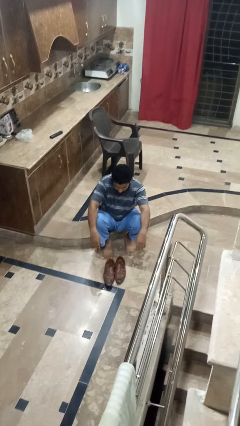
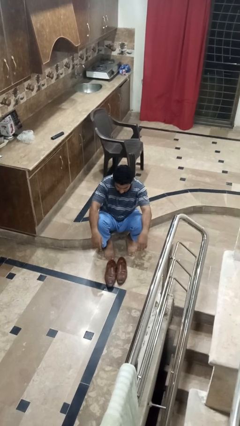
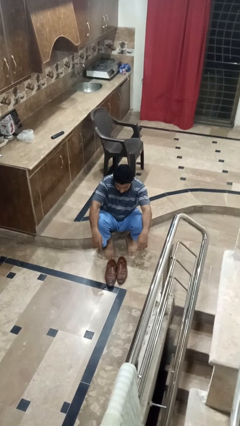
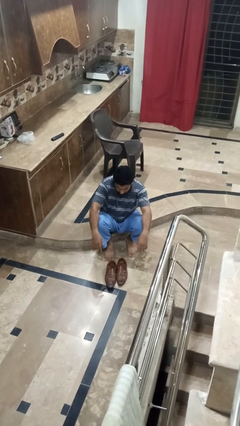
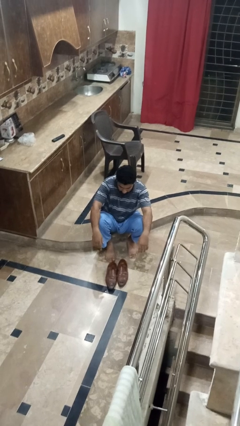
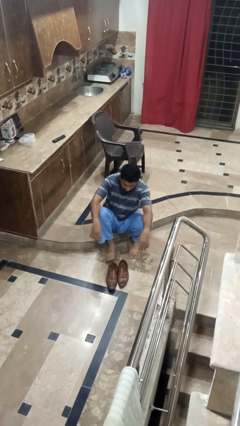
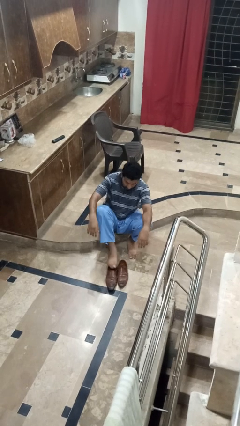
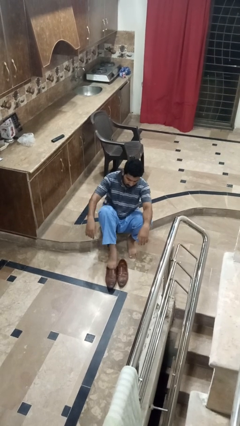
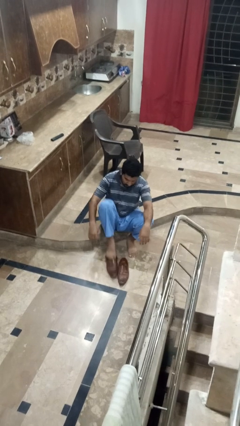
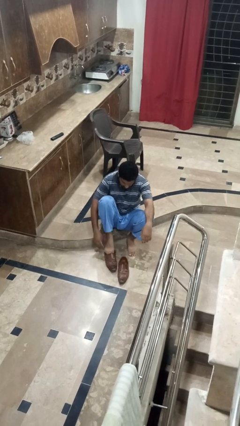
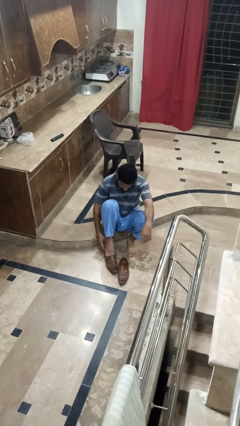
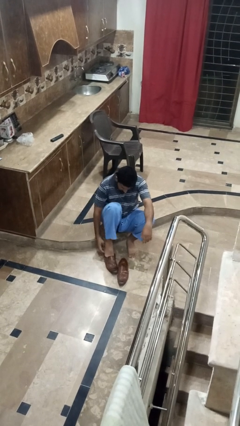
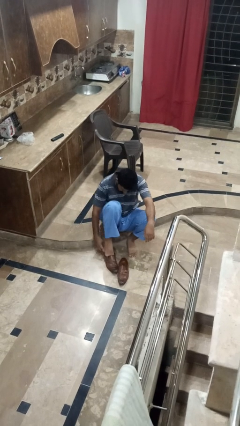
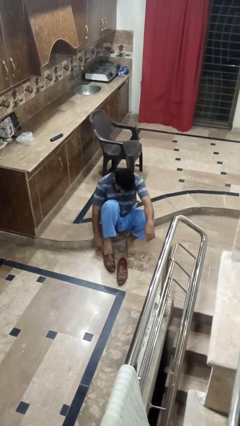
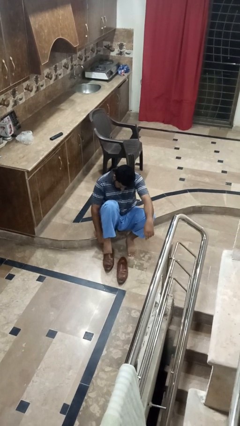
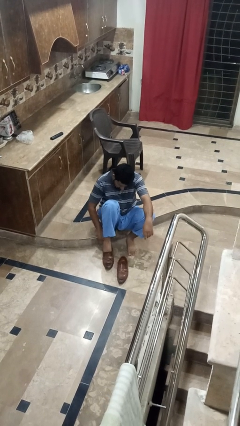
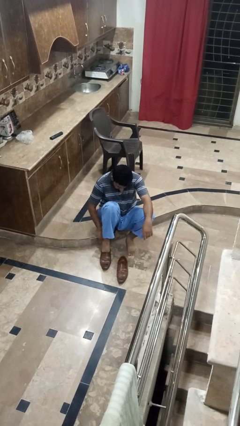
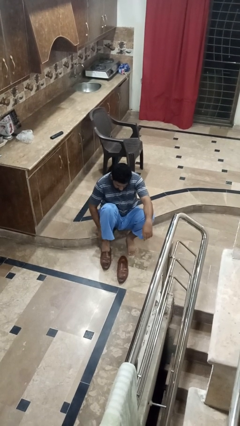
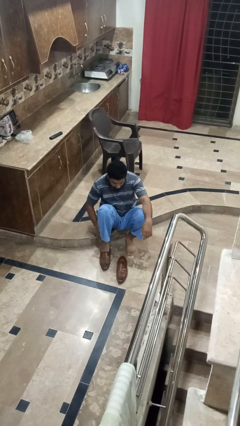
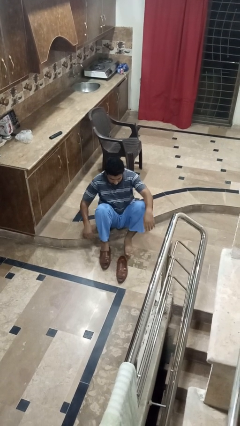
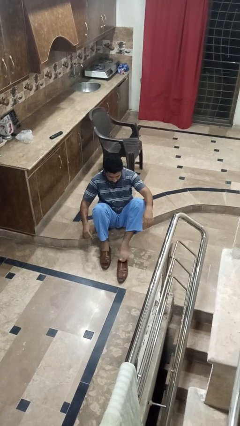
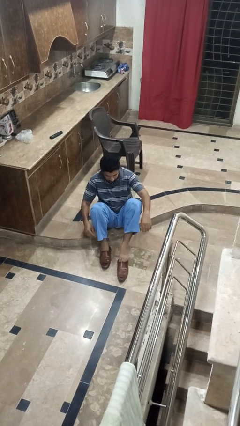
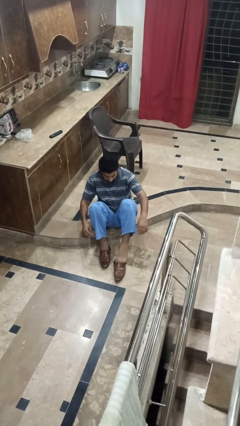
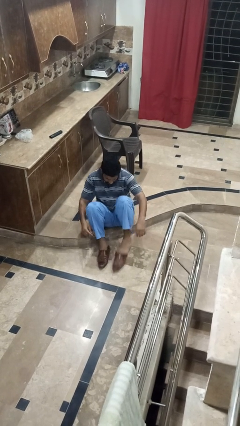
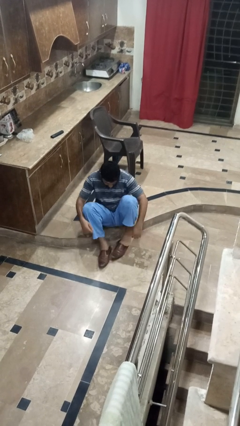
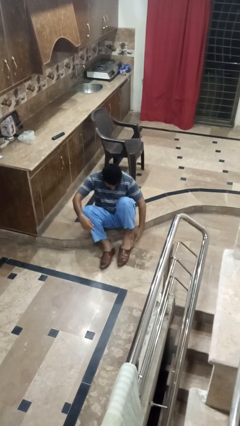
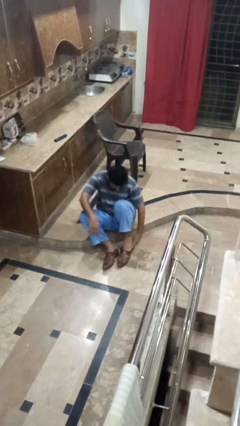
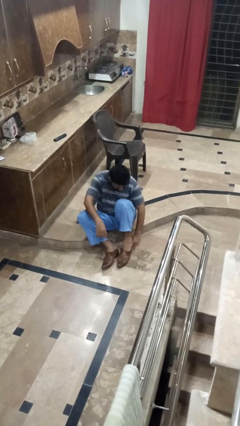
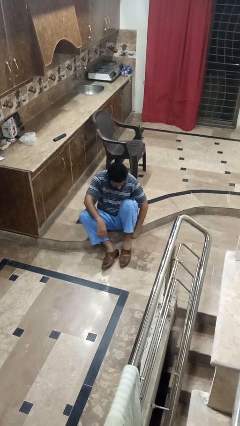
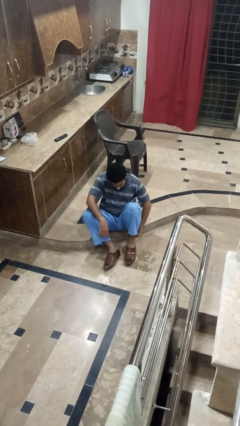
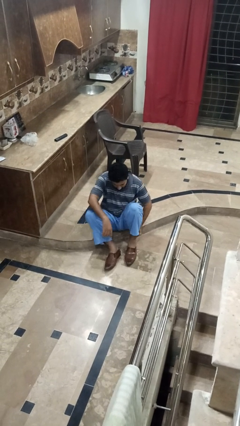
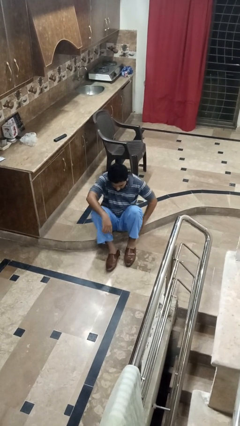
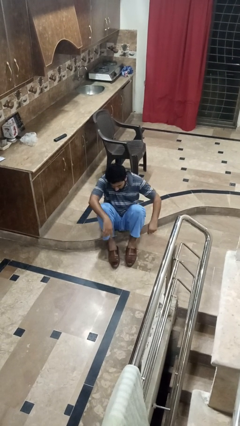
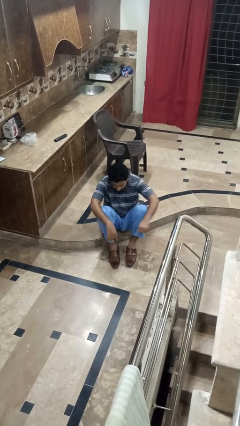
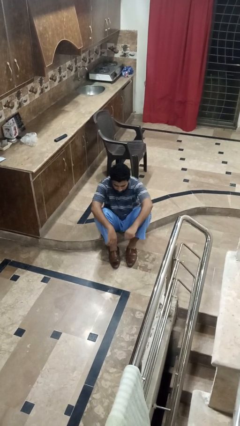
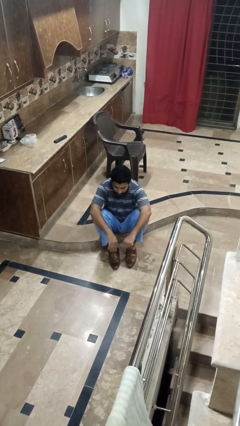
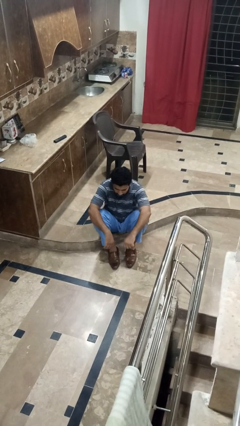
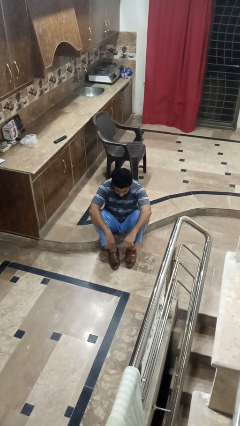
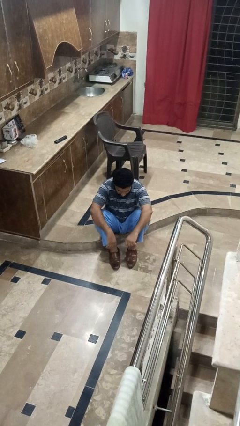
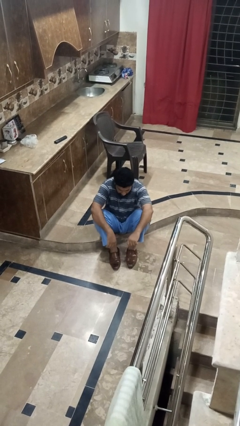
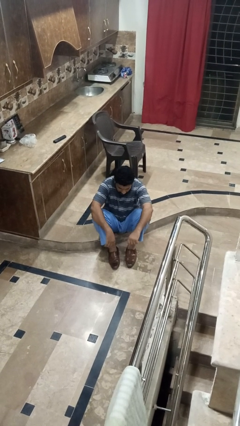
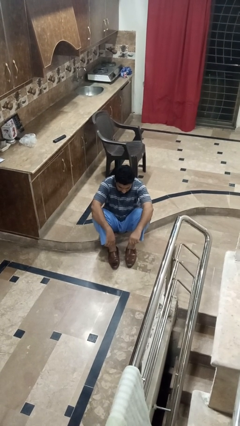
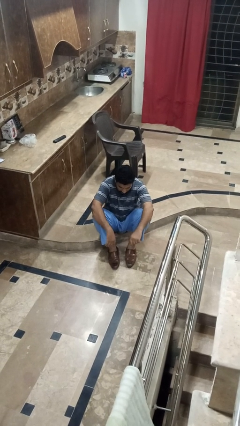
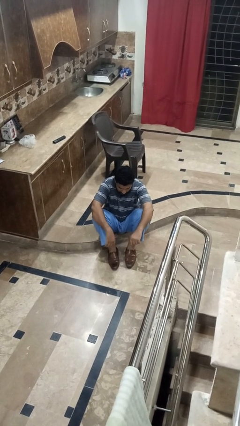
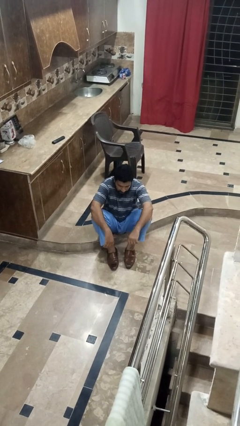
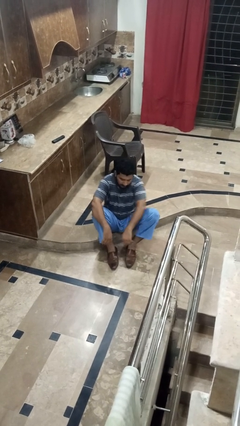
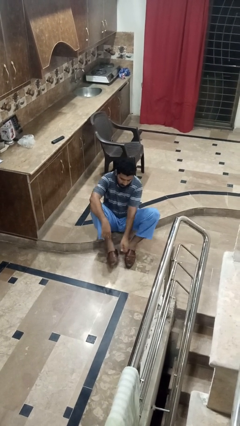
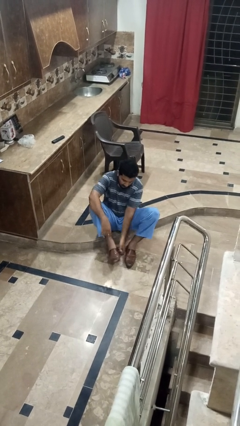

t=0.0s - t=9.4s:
person puts on boots

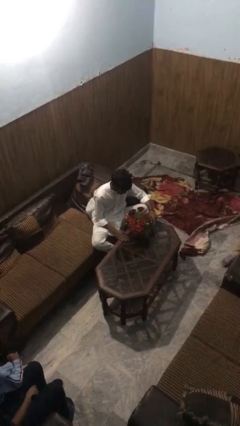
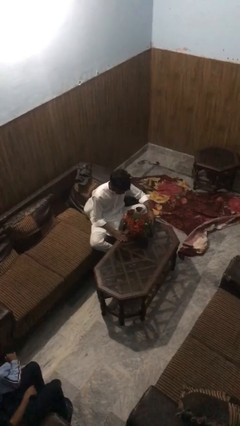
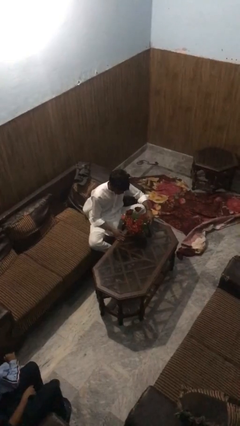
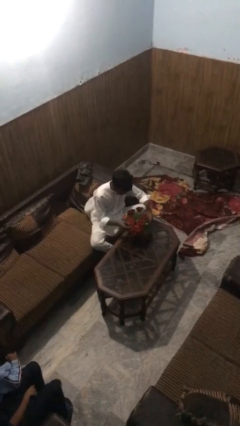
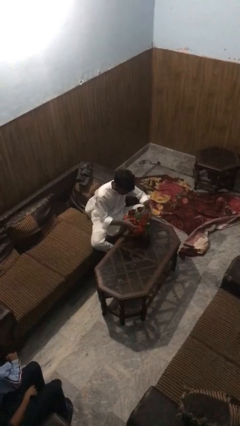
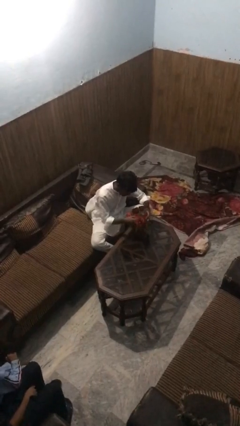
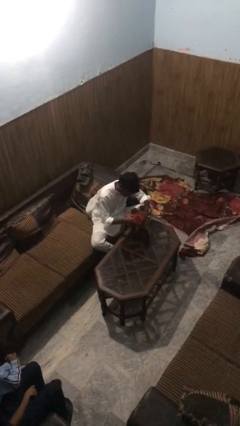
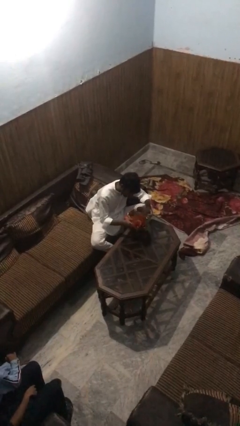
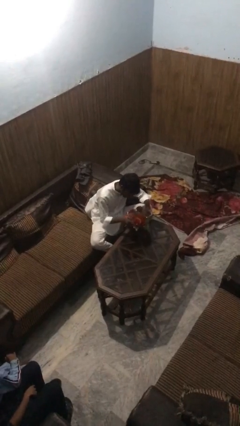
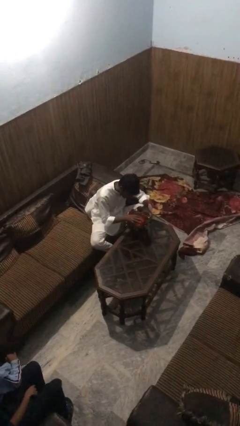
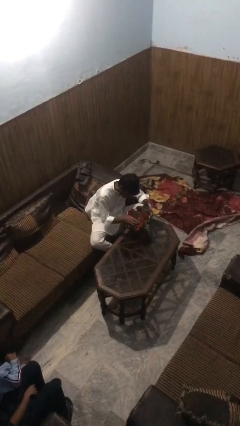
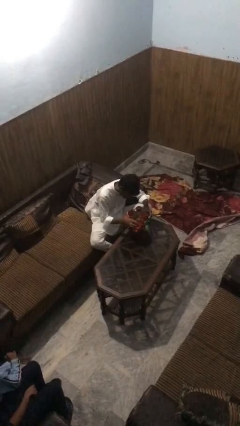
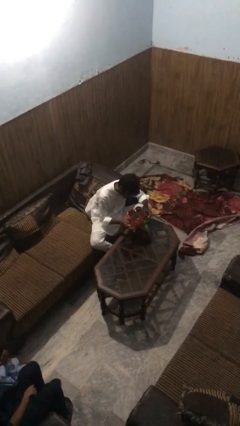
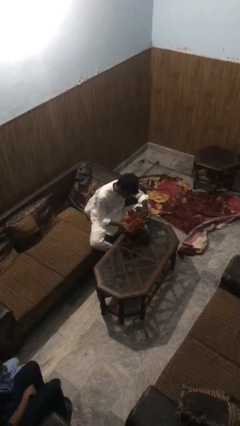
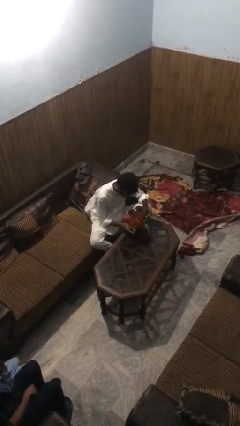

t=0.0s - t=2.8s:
person arranges flowers in vase

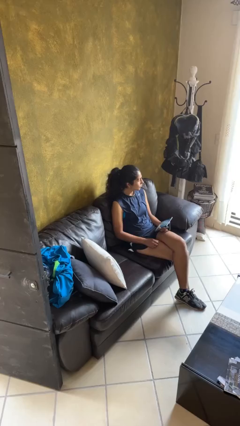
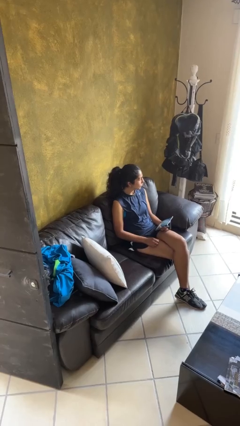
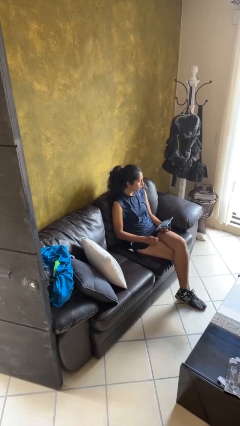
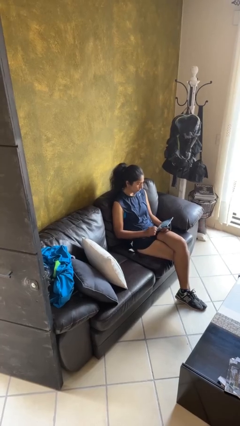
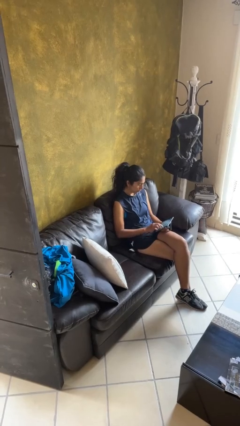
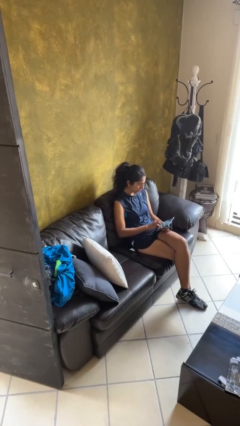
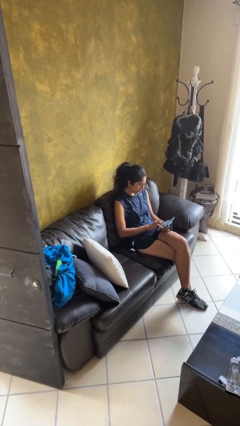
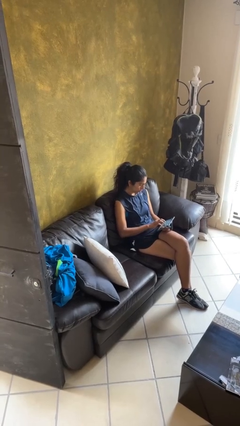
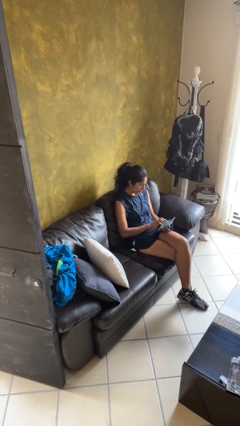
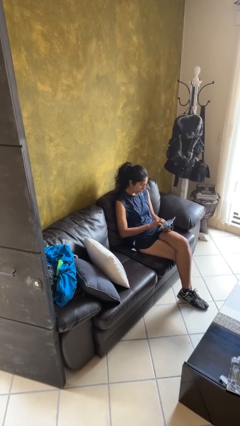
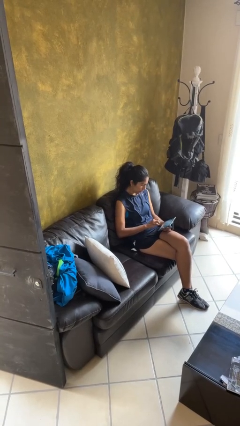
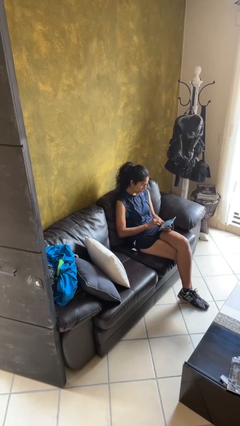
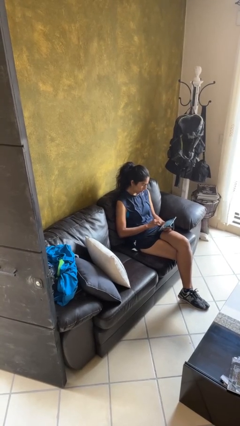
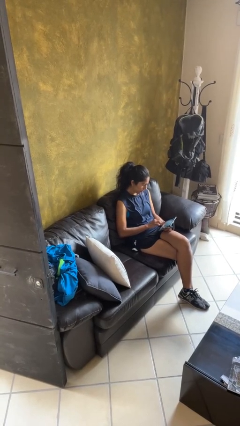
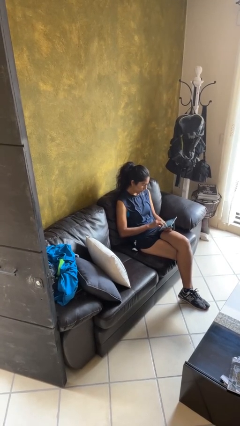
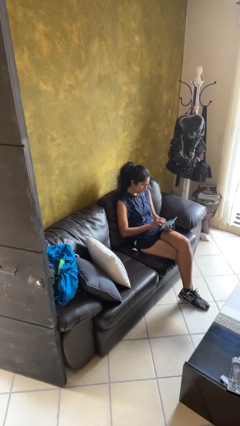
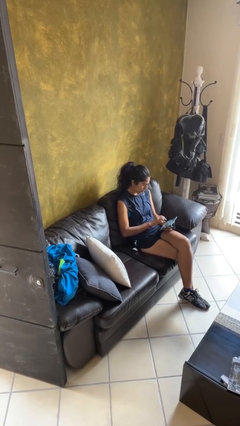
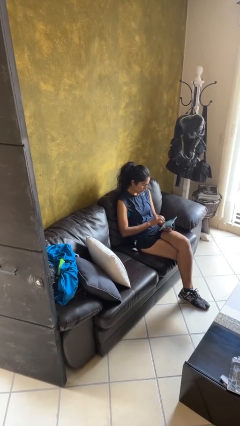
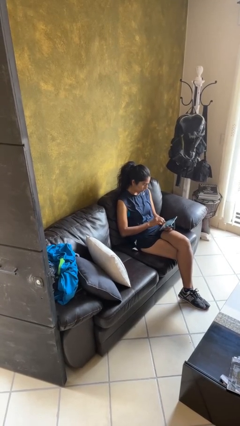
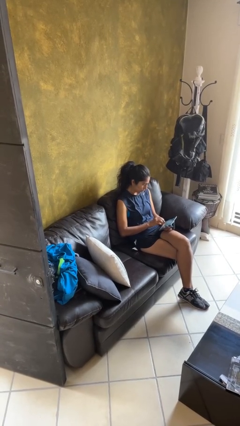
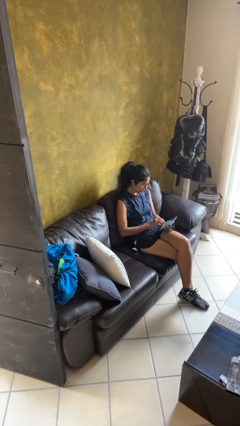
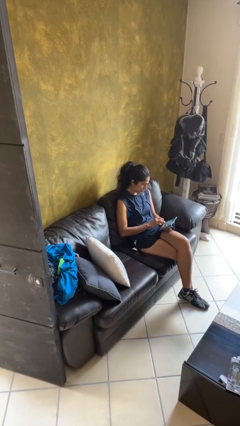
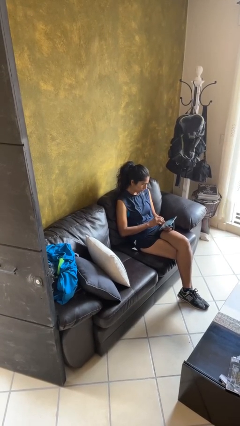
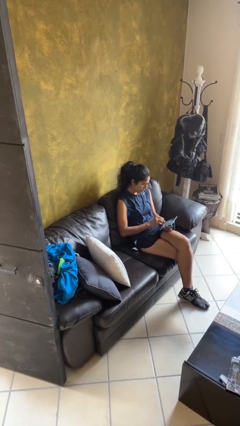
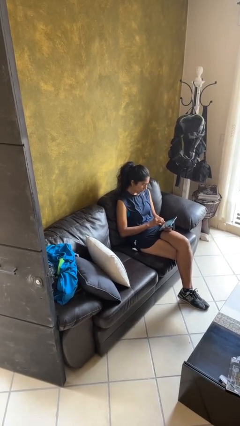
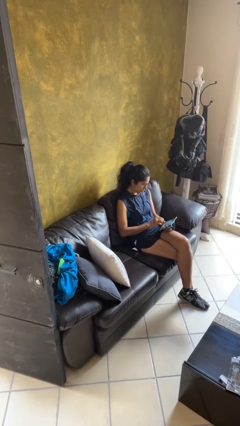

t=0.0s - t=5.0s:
person interacts with tablet

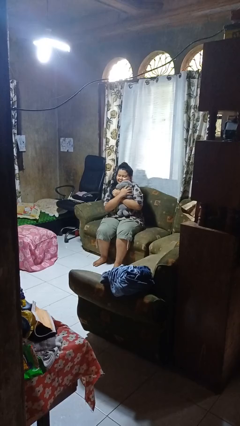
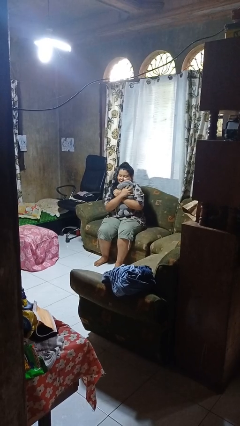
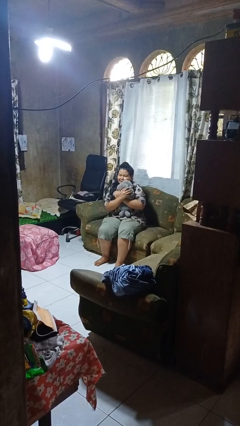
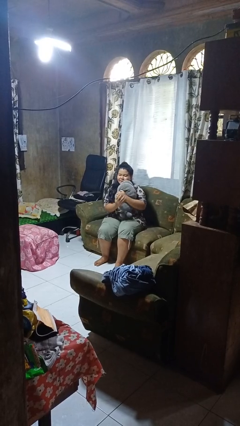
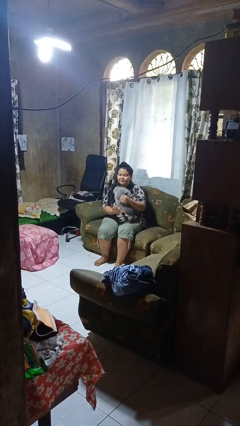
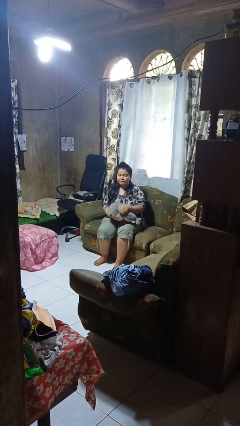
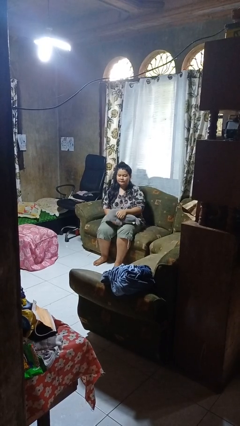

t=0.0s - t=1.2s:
person hugs stuffed animal
